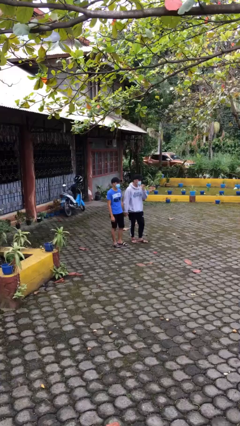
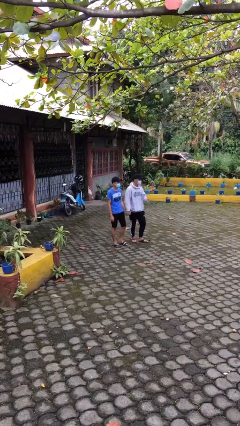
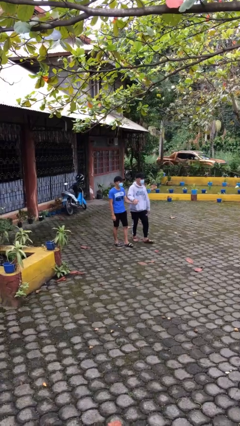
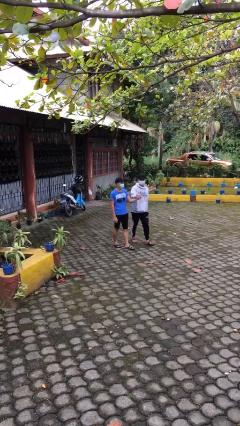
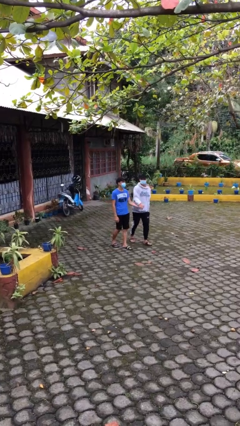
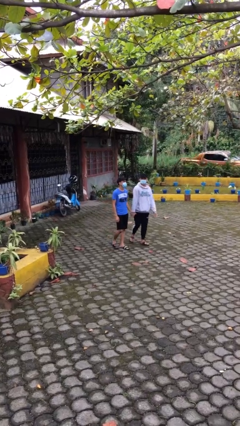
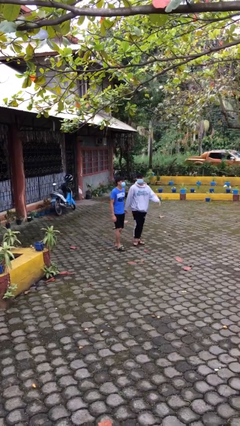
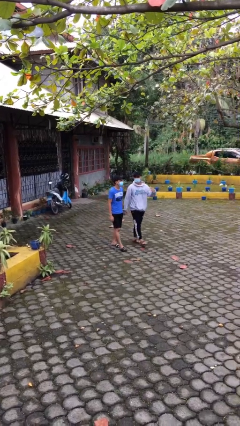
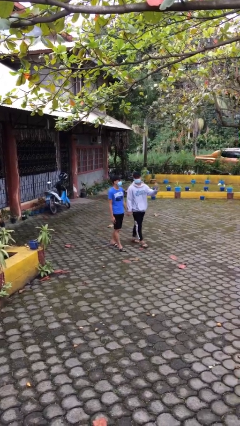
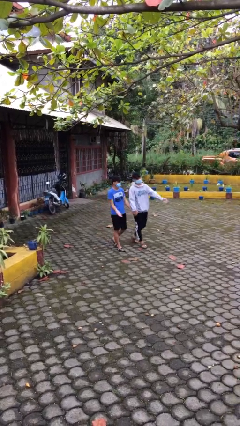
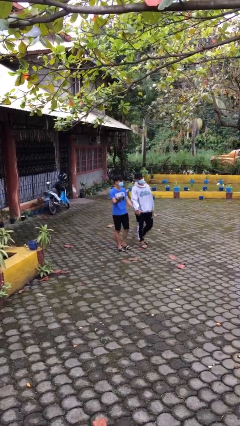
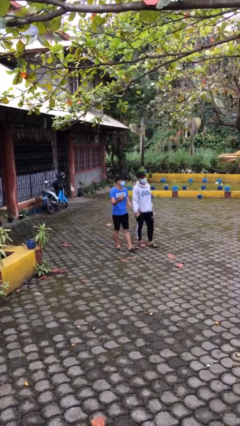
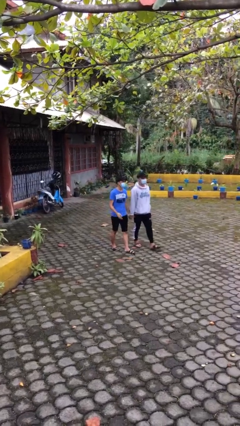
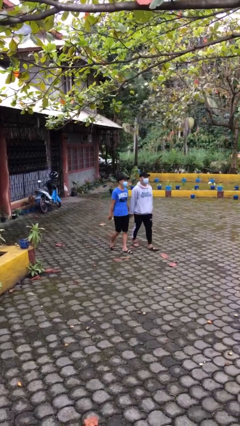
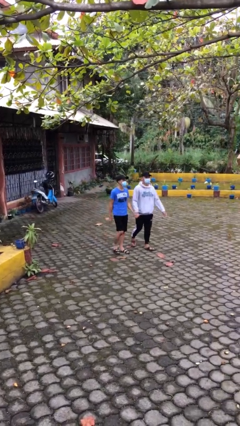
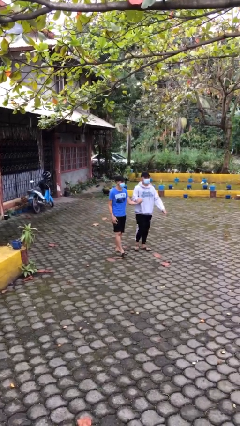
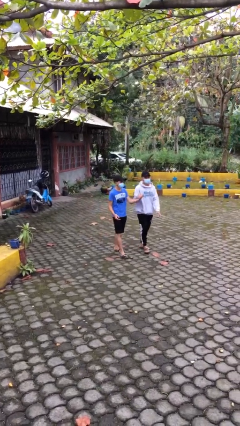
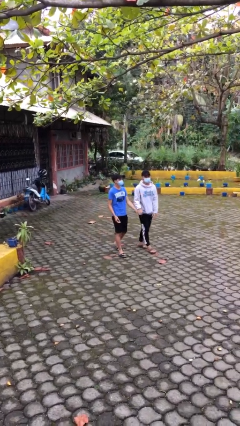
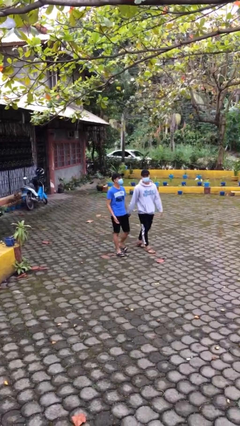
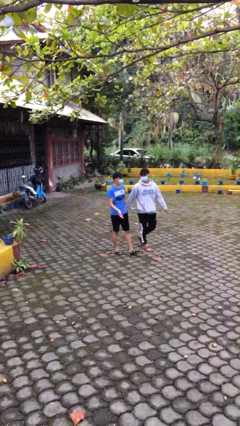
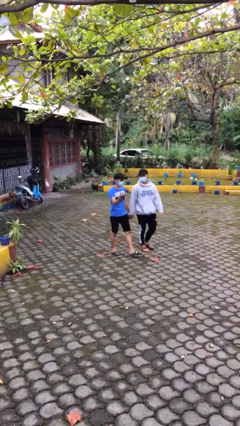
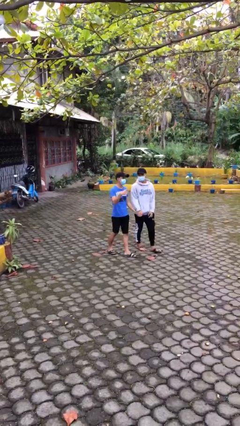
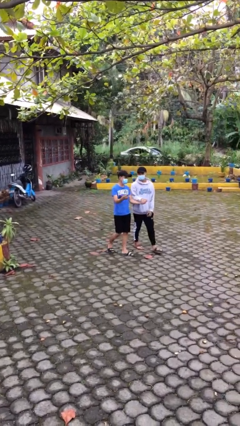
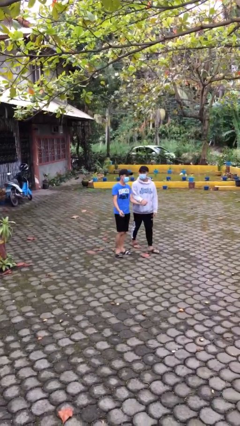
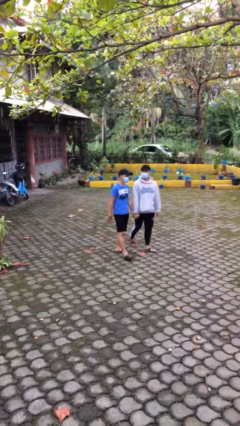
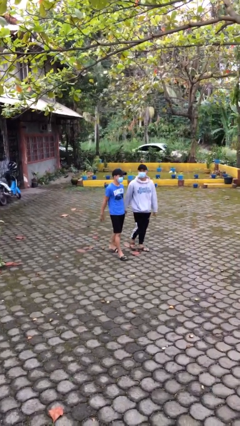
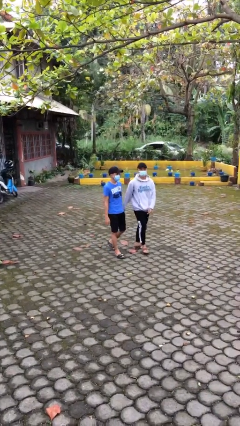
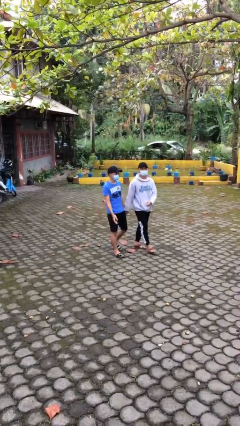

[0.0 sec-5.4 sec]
person holds hand

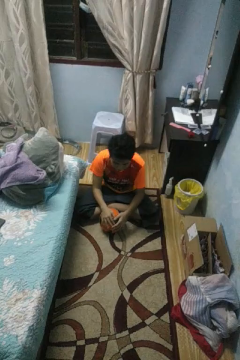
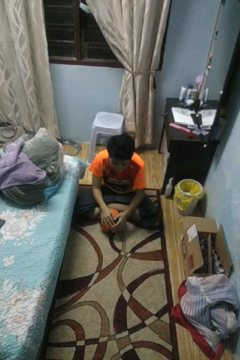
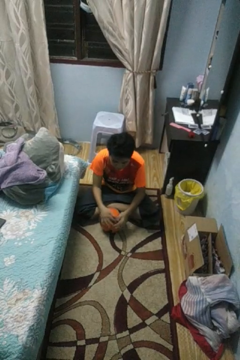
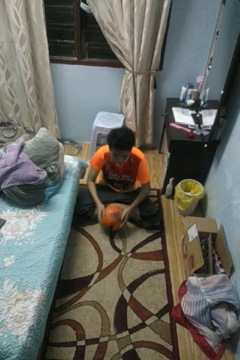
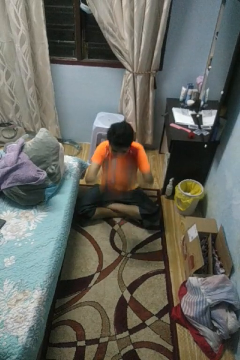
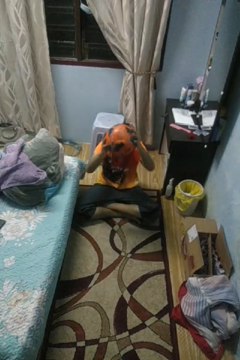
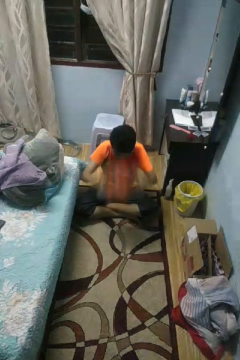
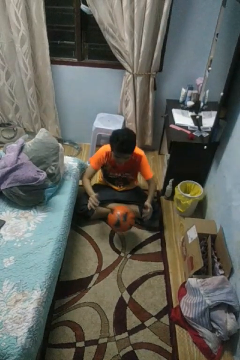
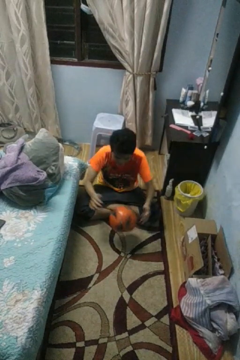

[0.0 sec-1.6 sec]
person bounces ball on floor

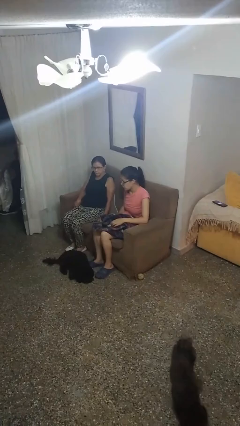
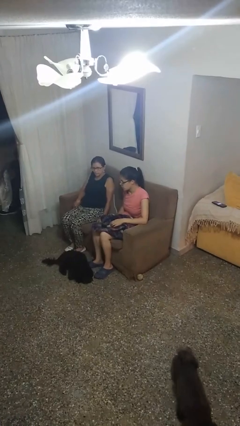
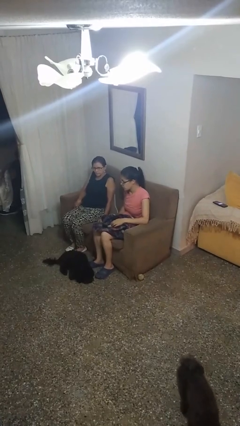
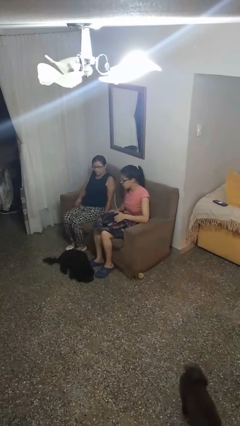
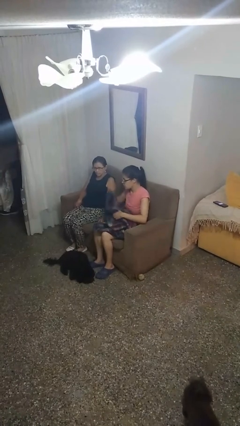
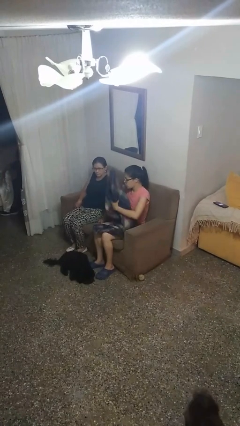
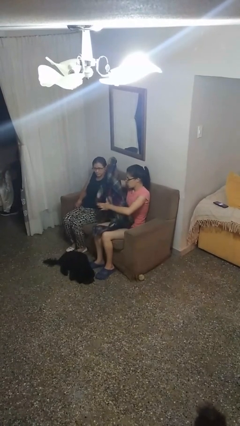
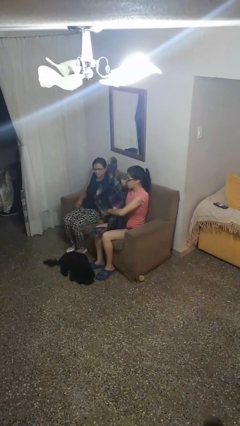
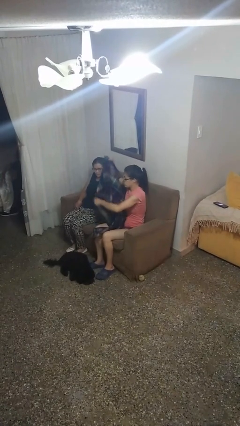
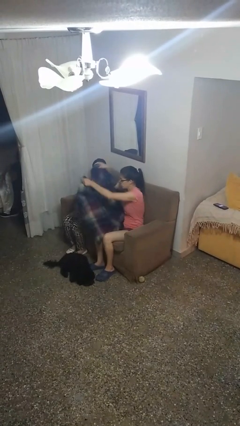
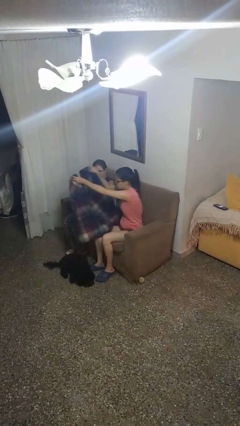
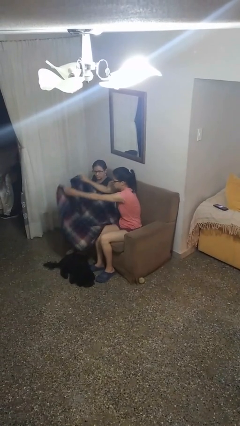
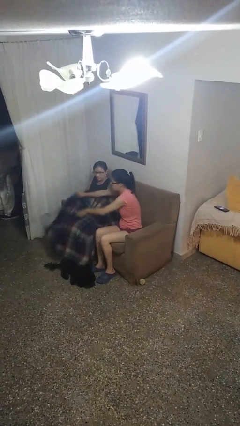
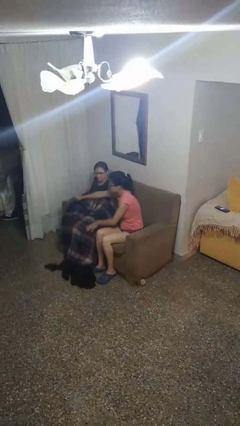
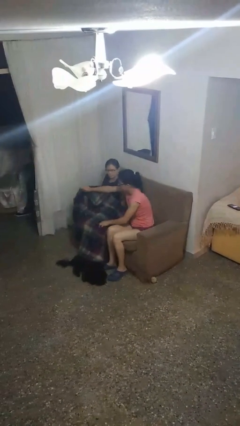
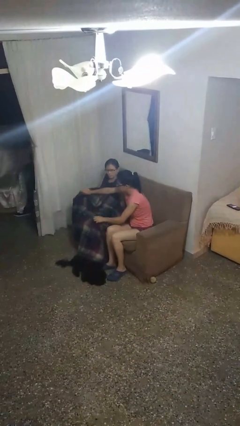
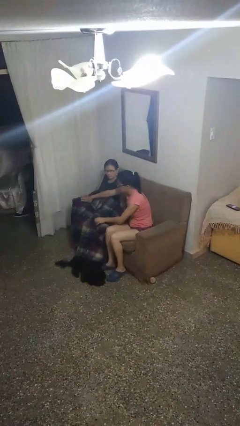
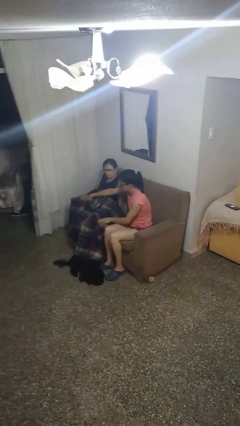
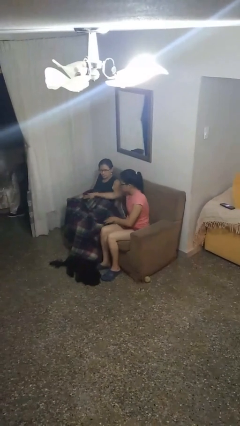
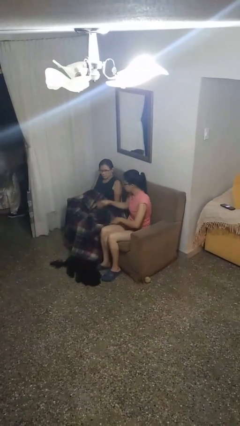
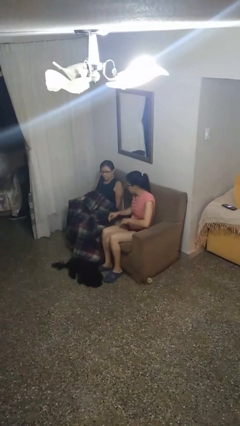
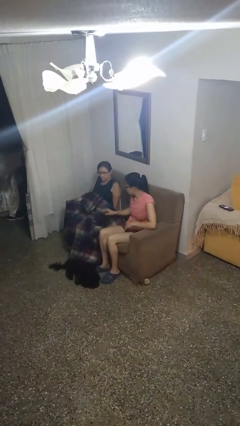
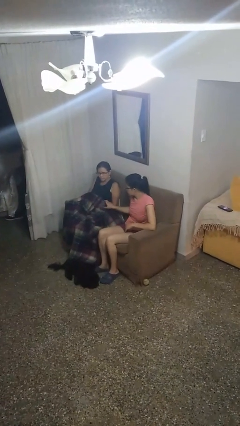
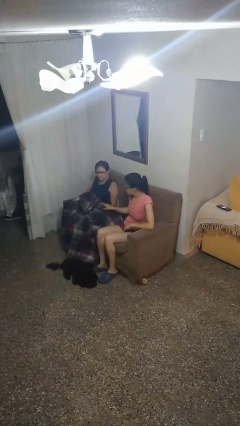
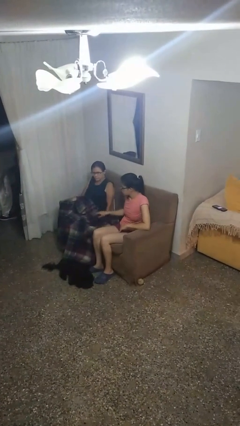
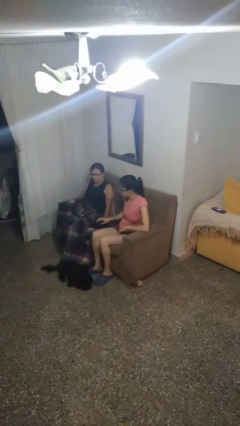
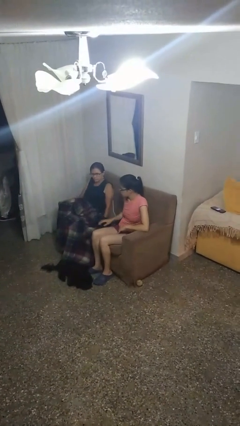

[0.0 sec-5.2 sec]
person covers friend with blanket

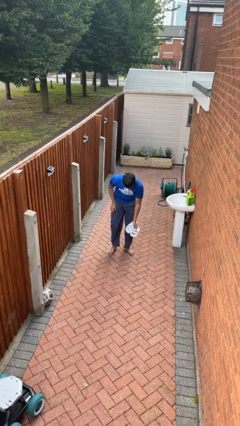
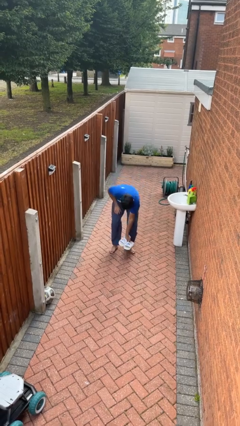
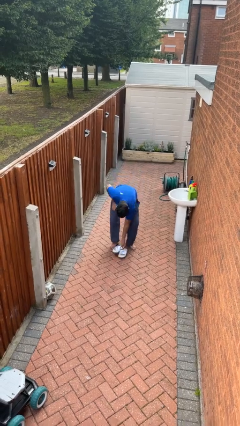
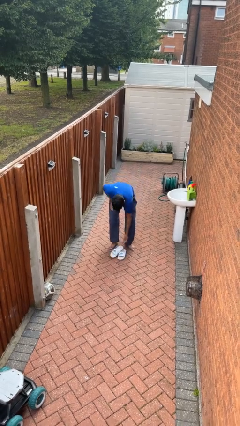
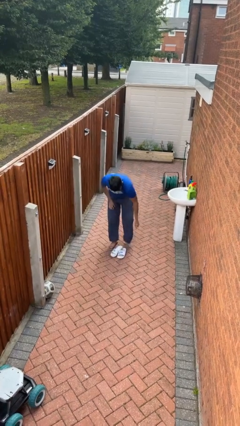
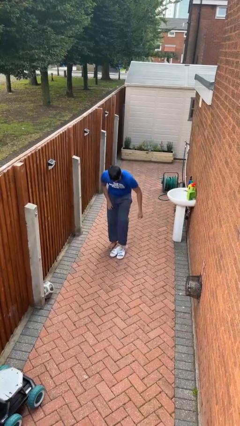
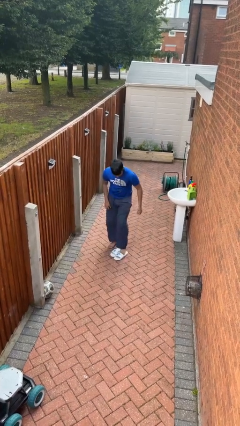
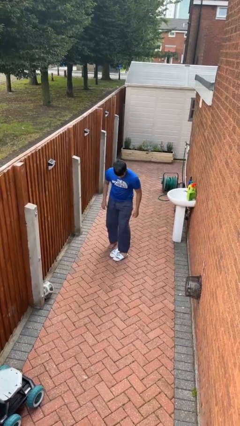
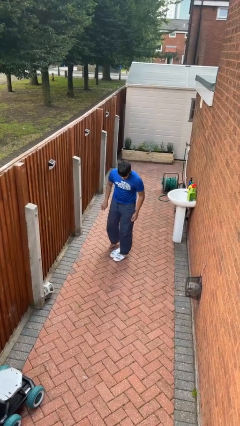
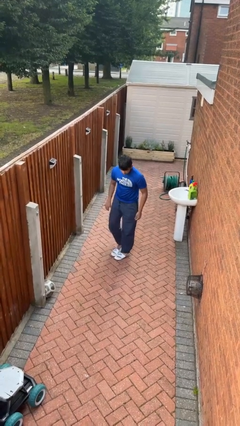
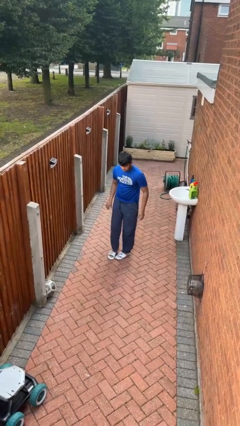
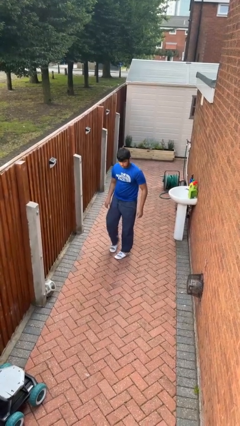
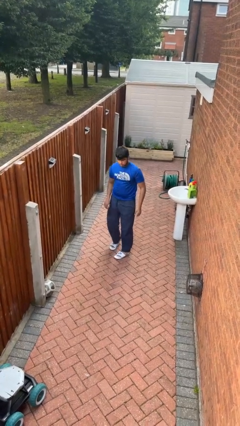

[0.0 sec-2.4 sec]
person puts on shoes

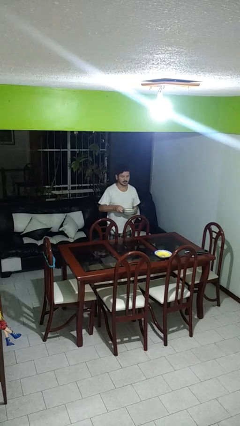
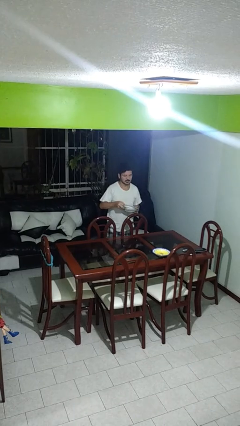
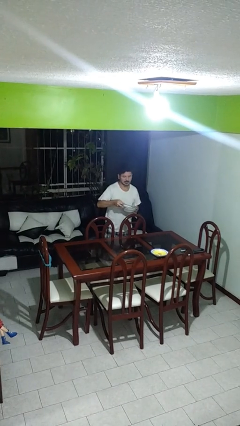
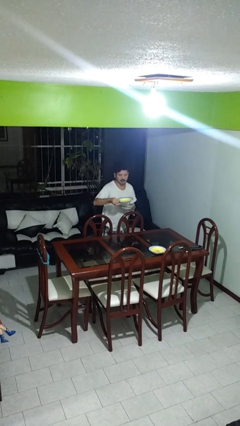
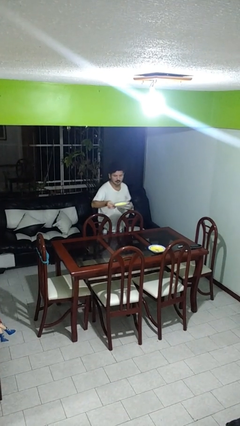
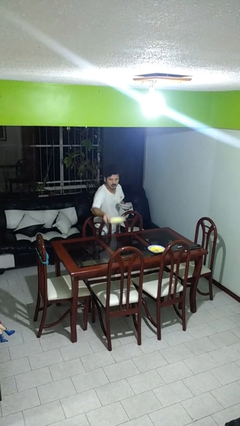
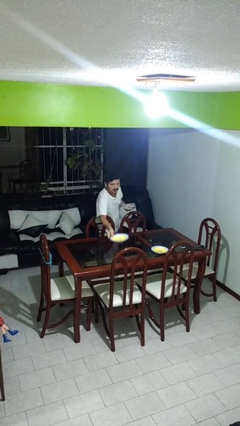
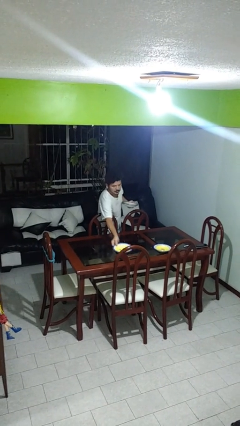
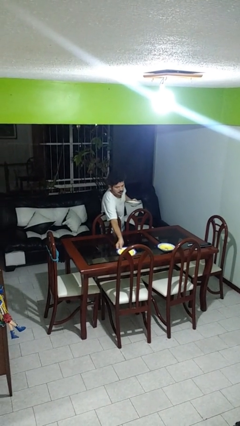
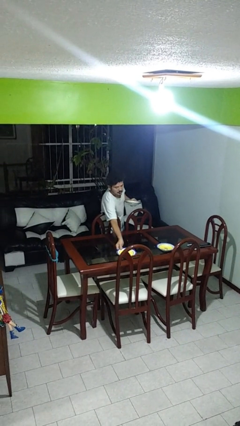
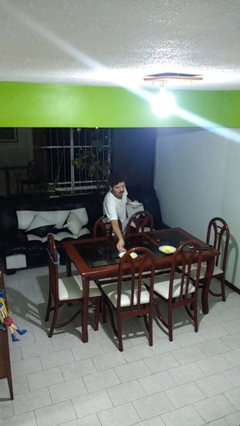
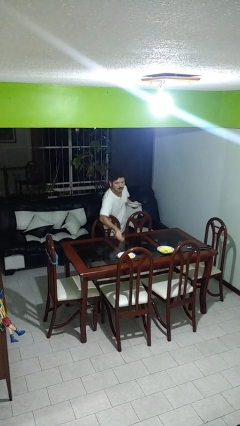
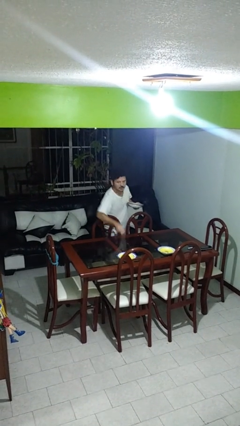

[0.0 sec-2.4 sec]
person sets table

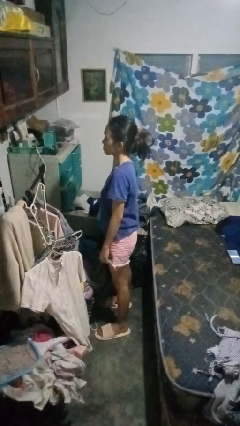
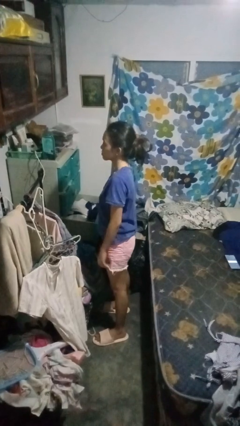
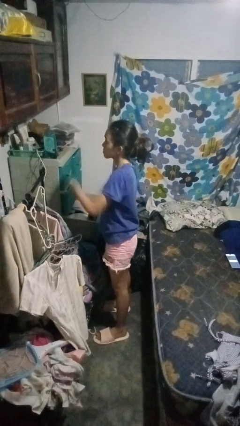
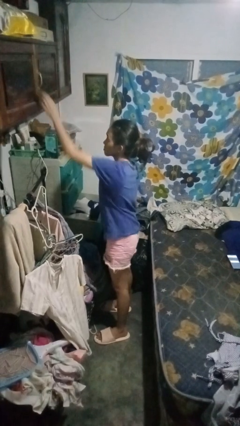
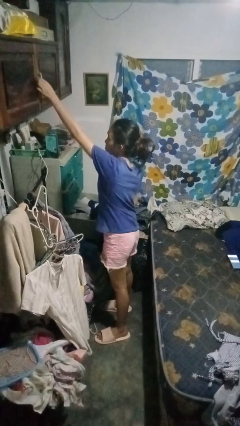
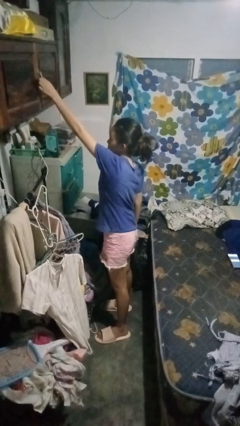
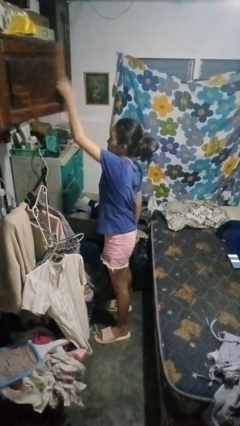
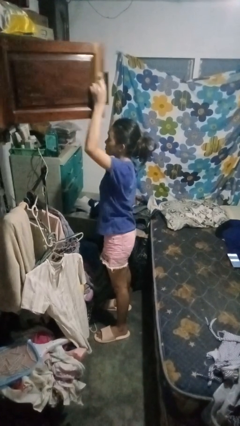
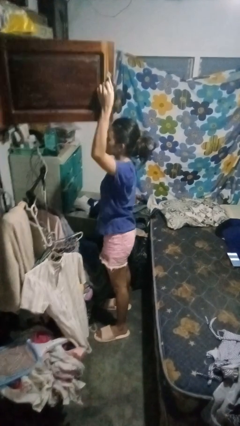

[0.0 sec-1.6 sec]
person opens closet door
